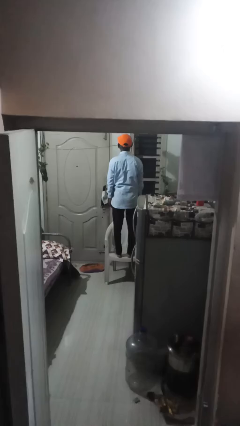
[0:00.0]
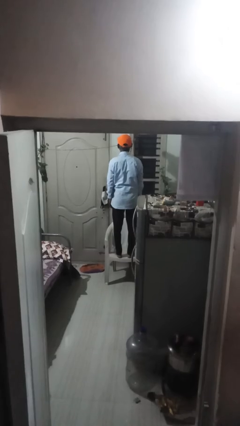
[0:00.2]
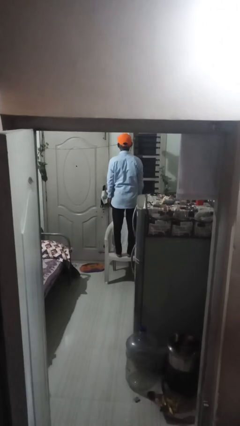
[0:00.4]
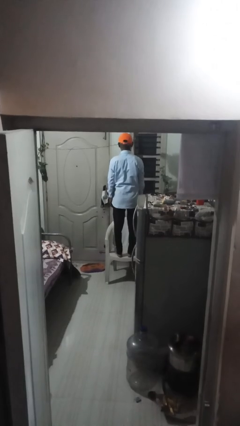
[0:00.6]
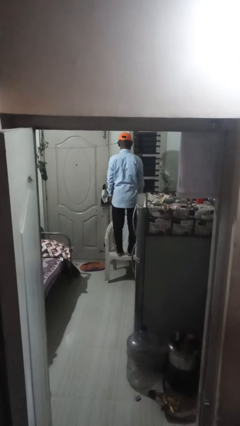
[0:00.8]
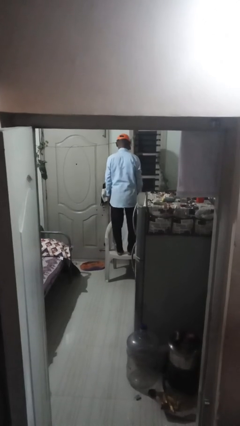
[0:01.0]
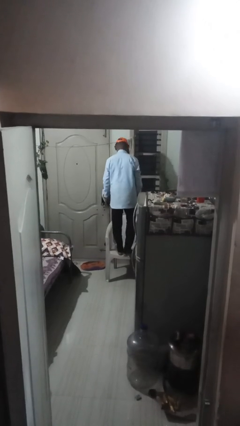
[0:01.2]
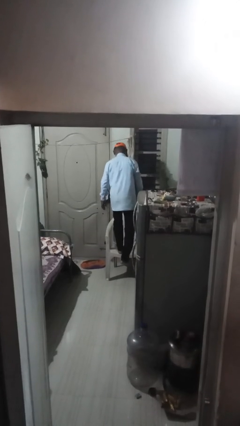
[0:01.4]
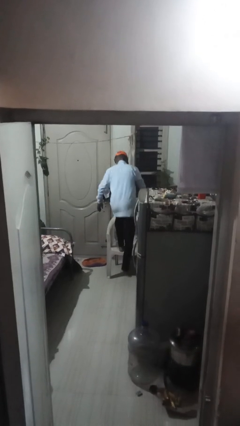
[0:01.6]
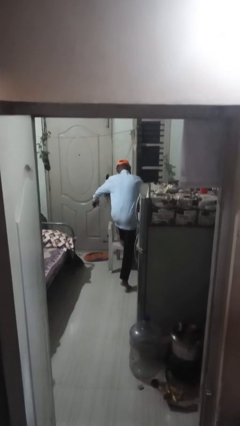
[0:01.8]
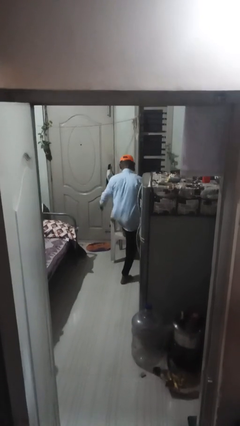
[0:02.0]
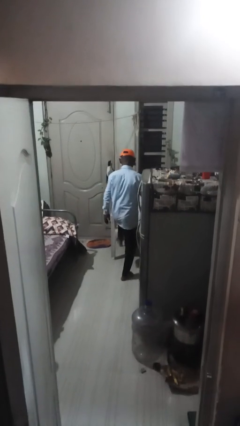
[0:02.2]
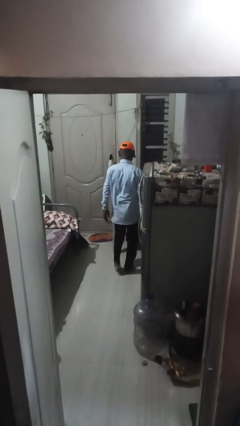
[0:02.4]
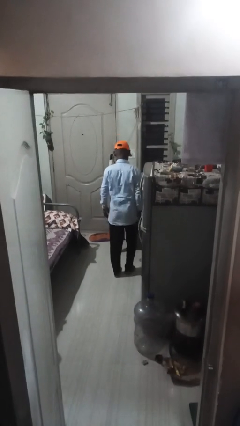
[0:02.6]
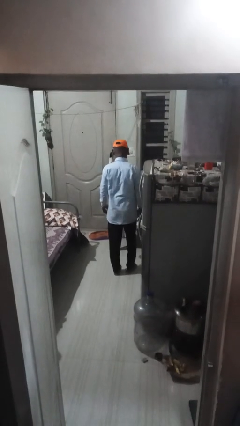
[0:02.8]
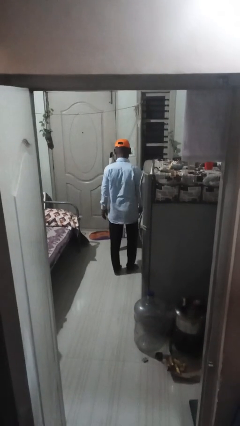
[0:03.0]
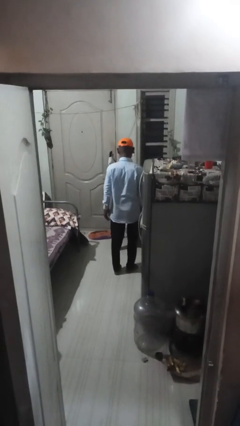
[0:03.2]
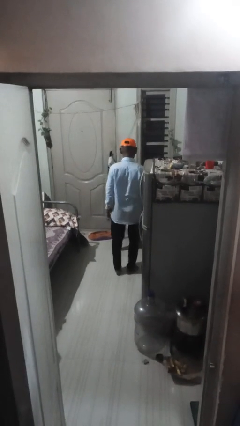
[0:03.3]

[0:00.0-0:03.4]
person climbs off chair

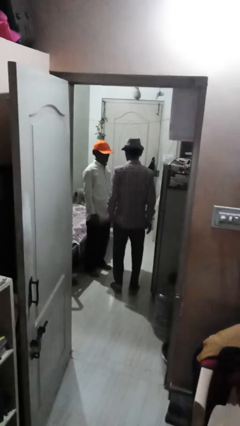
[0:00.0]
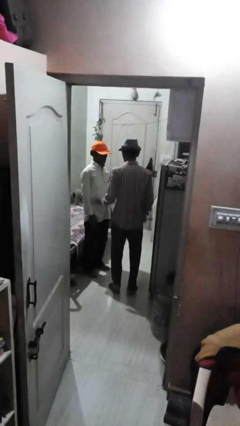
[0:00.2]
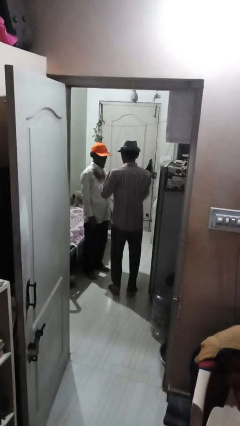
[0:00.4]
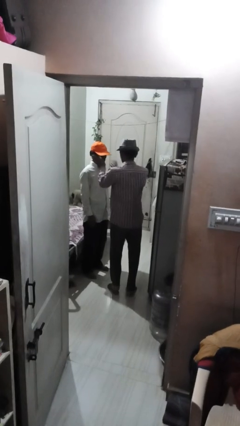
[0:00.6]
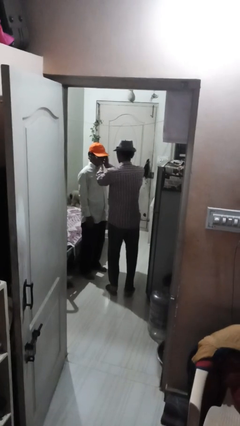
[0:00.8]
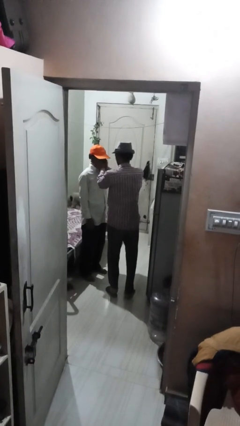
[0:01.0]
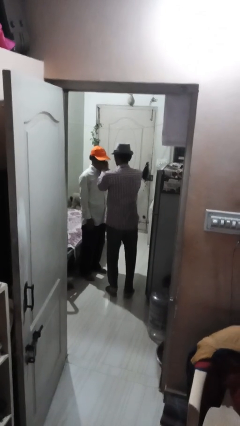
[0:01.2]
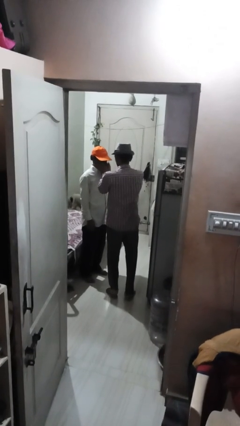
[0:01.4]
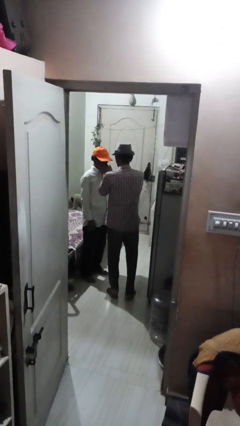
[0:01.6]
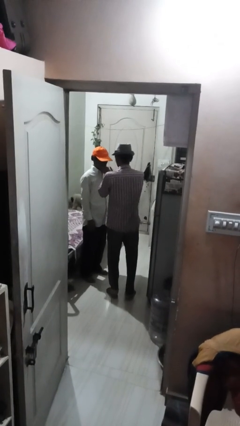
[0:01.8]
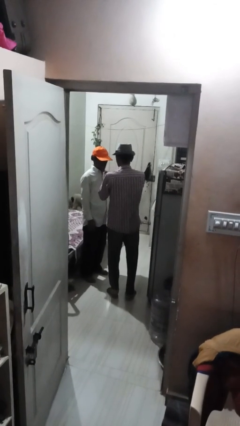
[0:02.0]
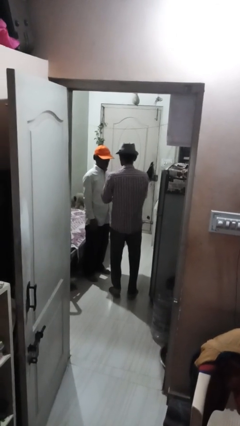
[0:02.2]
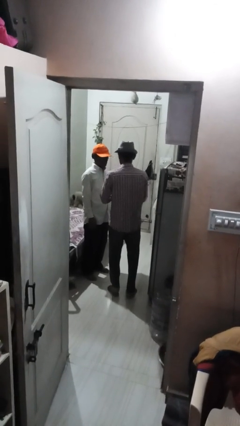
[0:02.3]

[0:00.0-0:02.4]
person touches face of person

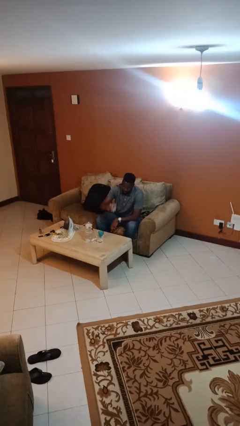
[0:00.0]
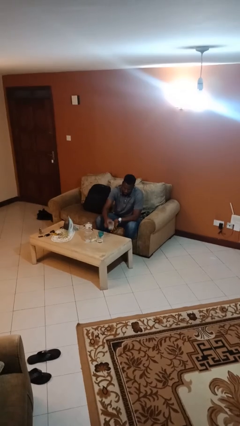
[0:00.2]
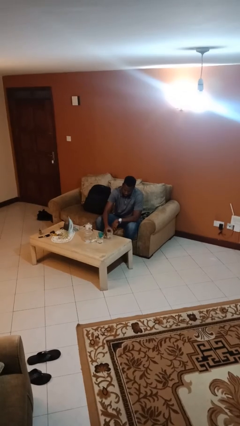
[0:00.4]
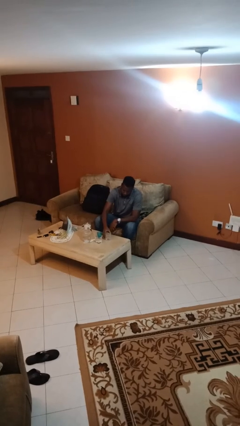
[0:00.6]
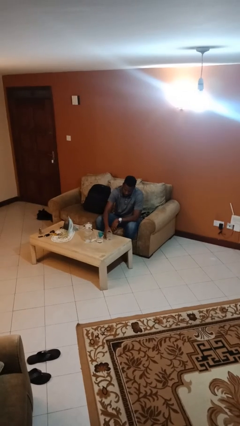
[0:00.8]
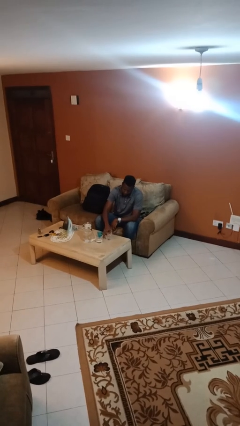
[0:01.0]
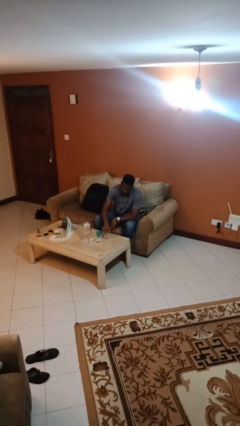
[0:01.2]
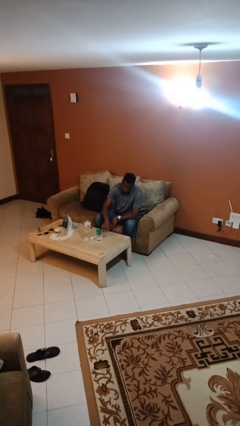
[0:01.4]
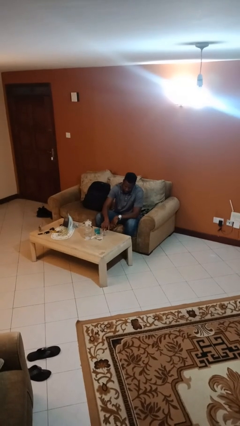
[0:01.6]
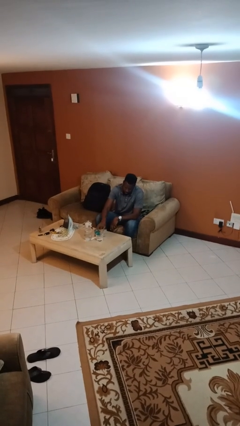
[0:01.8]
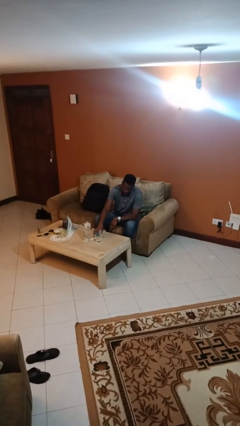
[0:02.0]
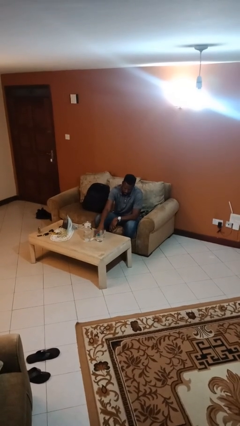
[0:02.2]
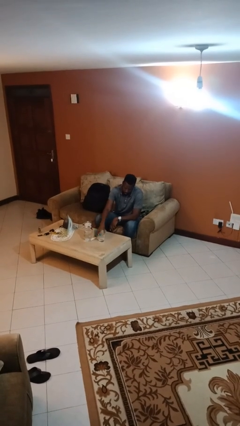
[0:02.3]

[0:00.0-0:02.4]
person puts down object on table

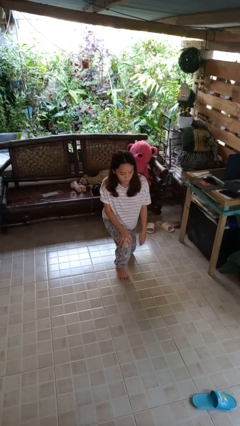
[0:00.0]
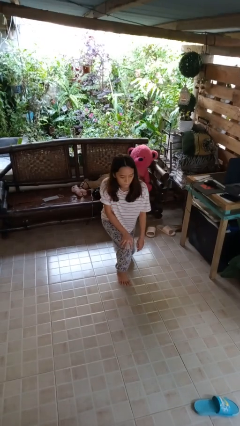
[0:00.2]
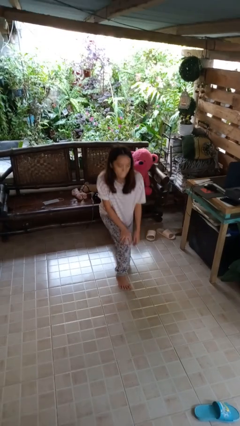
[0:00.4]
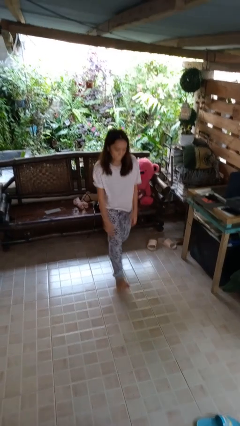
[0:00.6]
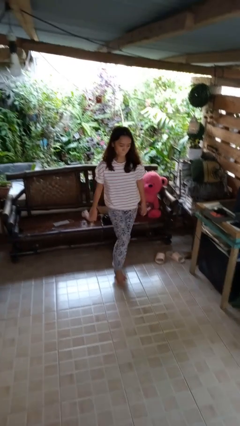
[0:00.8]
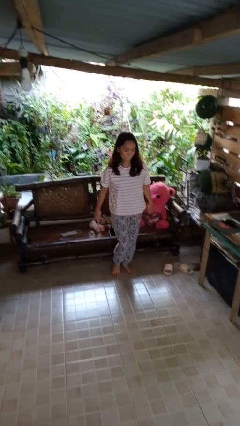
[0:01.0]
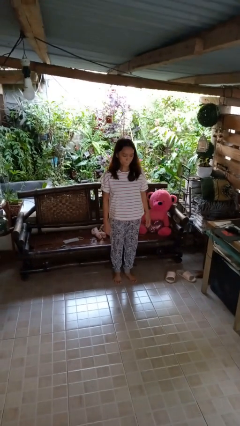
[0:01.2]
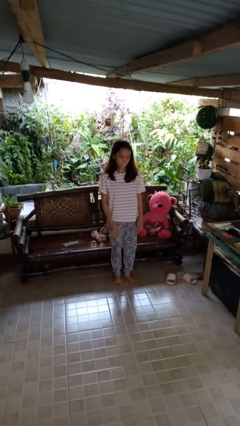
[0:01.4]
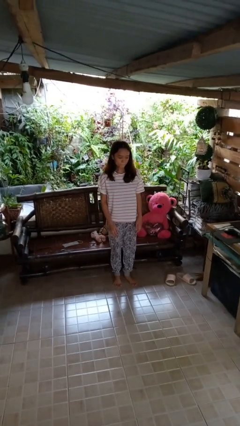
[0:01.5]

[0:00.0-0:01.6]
person stands up from floor

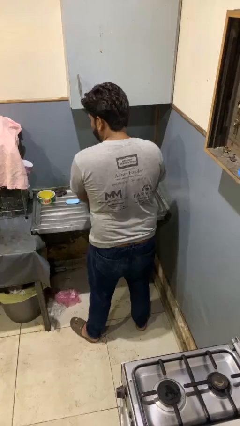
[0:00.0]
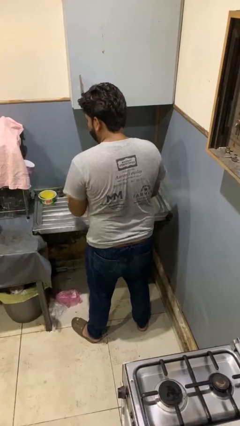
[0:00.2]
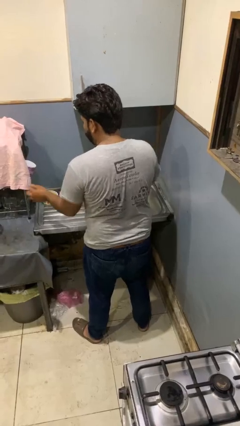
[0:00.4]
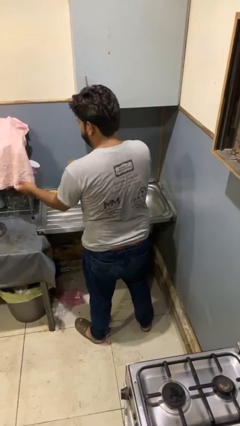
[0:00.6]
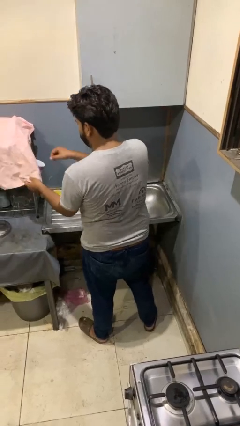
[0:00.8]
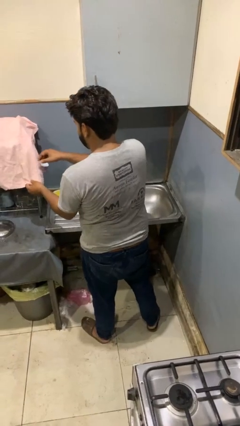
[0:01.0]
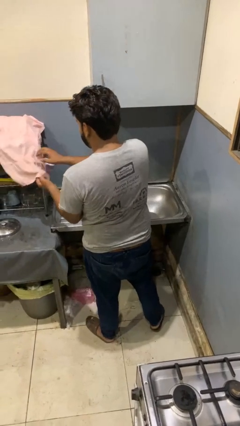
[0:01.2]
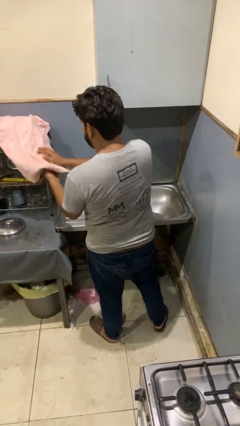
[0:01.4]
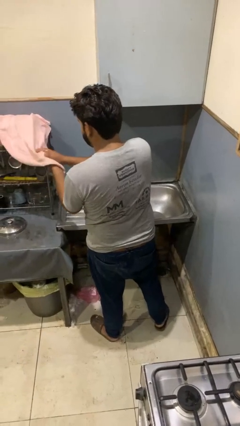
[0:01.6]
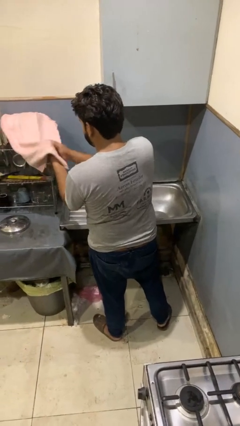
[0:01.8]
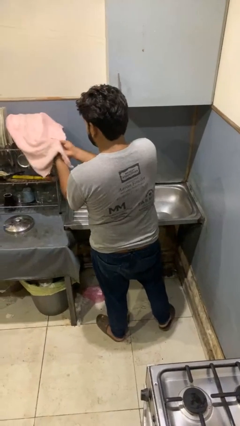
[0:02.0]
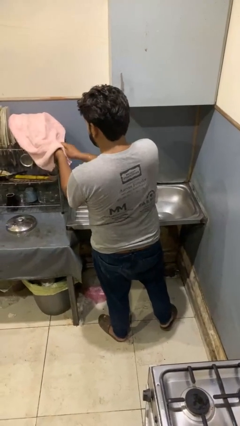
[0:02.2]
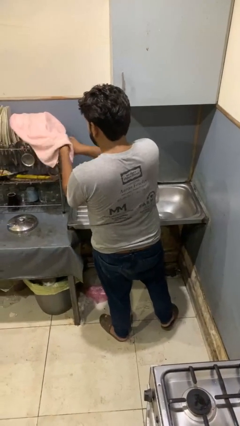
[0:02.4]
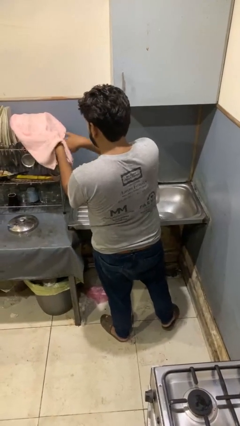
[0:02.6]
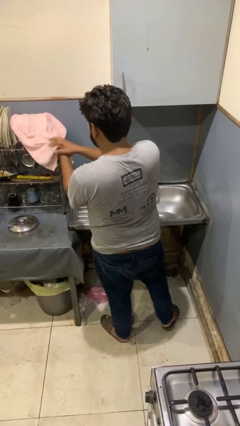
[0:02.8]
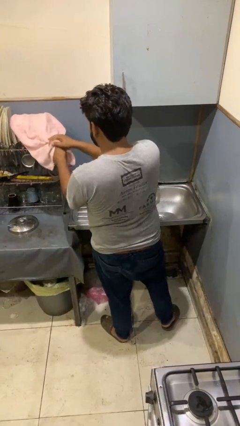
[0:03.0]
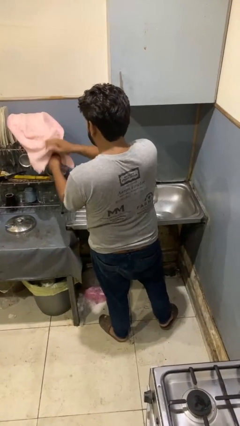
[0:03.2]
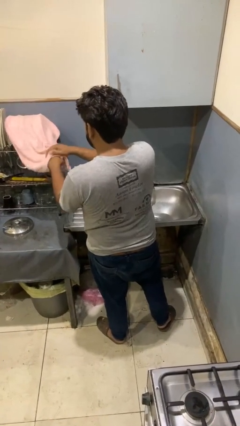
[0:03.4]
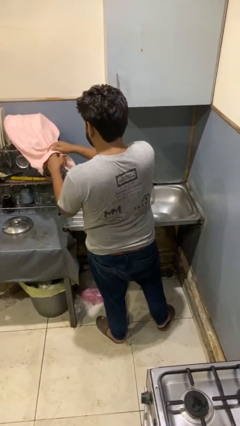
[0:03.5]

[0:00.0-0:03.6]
person dries hands with towel

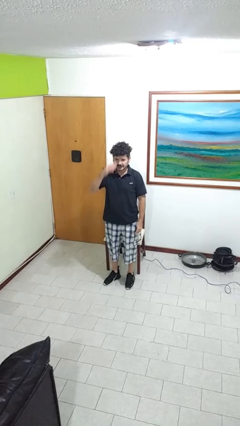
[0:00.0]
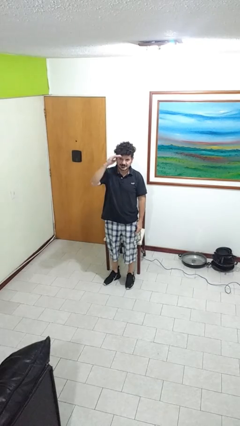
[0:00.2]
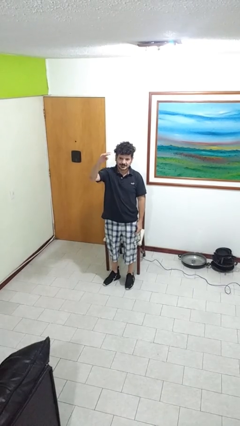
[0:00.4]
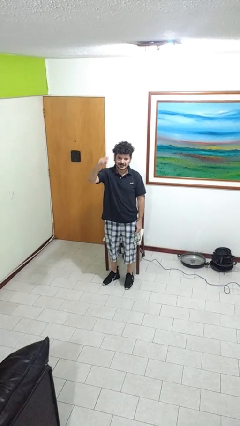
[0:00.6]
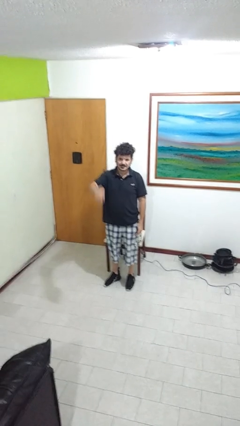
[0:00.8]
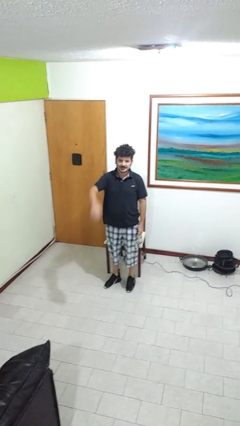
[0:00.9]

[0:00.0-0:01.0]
person salutes

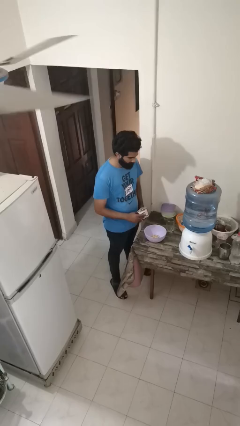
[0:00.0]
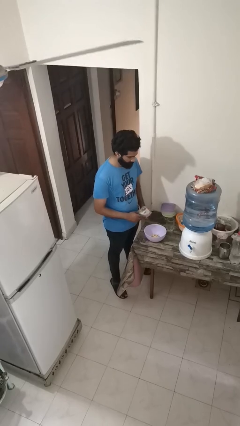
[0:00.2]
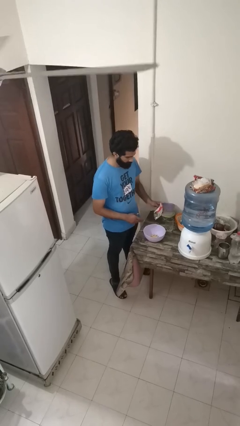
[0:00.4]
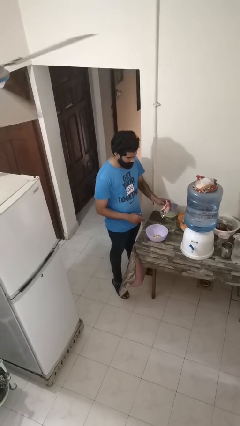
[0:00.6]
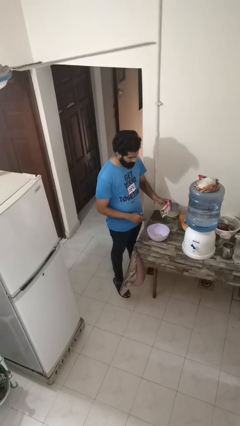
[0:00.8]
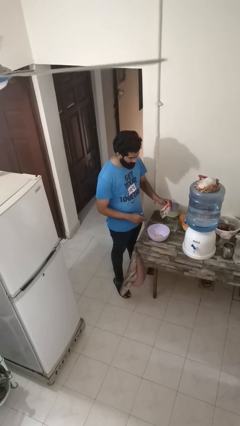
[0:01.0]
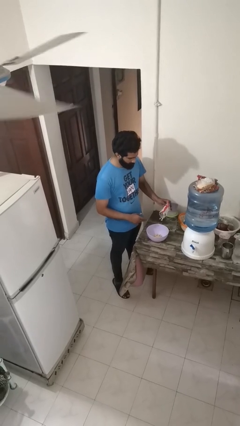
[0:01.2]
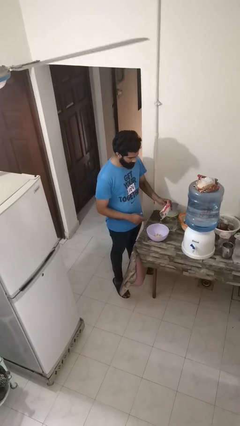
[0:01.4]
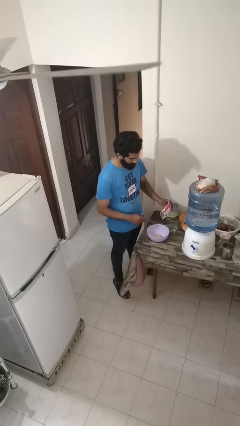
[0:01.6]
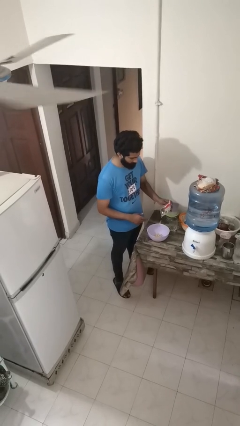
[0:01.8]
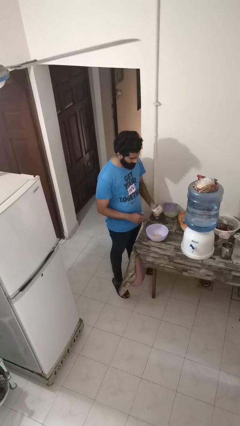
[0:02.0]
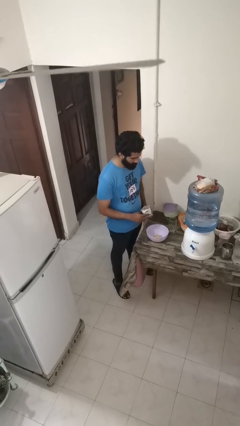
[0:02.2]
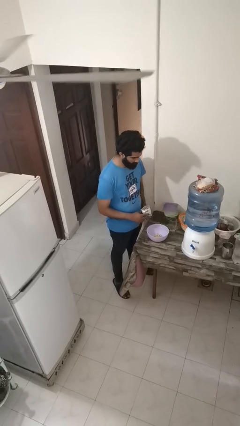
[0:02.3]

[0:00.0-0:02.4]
person pours into bowl

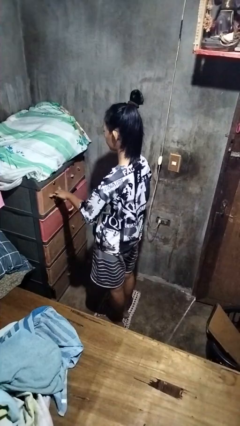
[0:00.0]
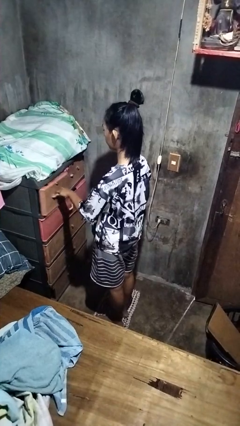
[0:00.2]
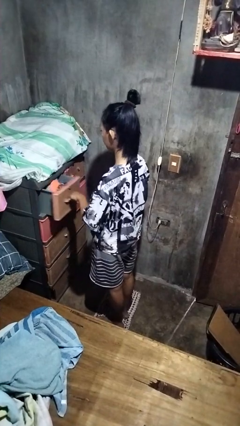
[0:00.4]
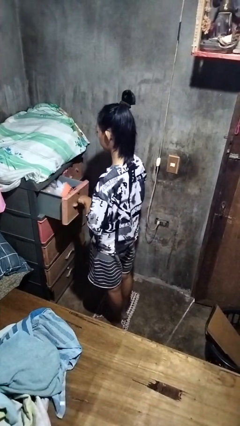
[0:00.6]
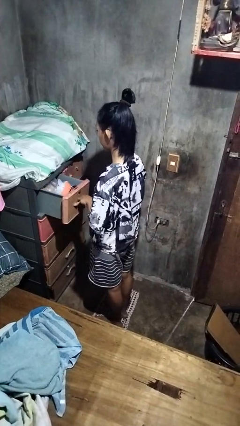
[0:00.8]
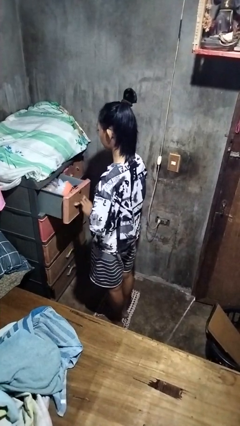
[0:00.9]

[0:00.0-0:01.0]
person opens dresser drawer
